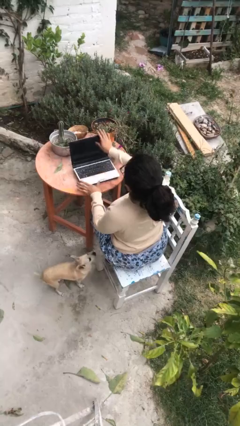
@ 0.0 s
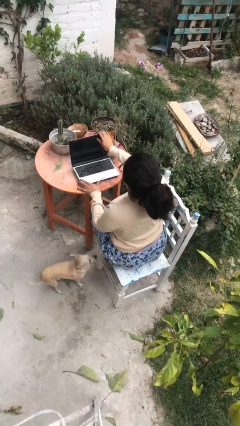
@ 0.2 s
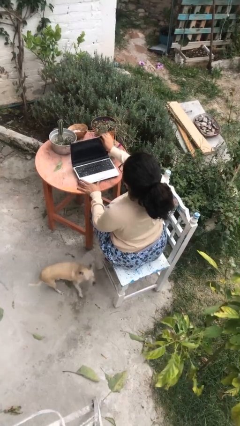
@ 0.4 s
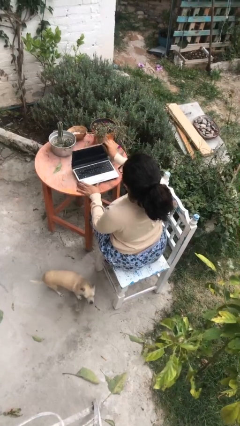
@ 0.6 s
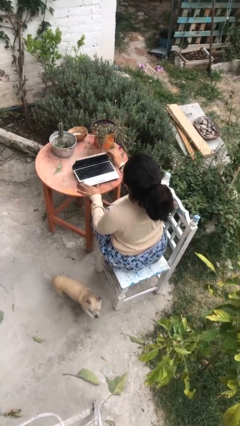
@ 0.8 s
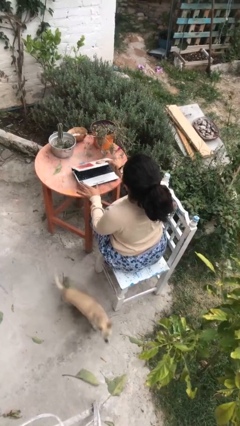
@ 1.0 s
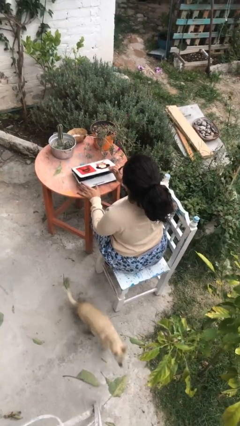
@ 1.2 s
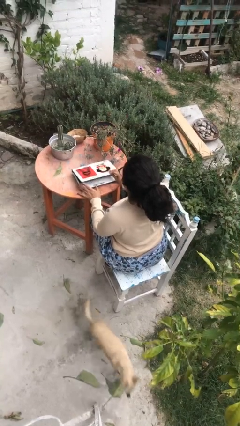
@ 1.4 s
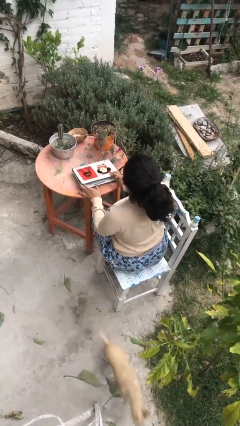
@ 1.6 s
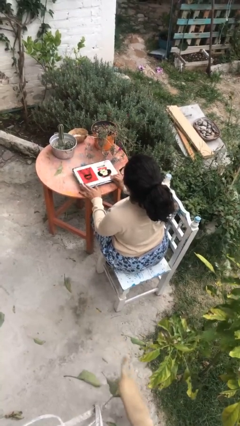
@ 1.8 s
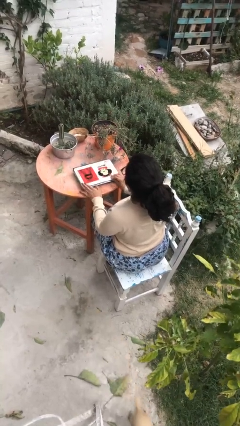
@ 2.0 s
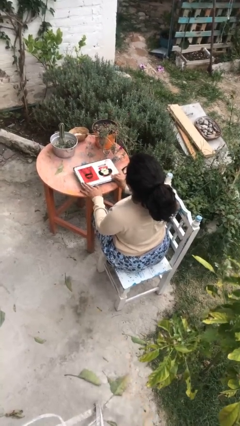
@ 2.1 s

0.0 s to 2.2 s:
person closes laptop

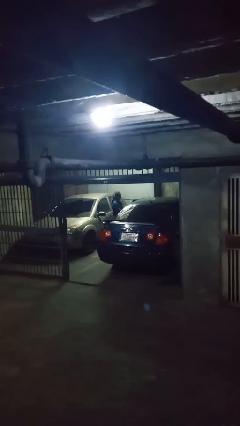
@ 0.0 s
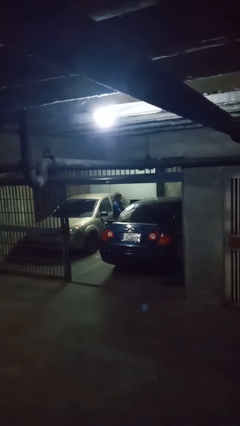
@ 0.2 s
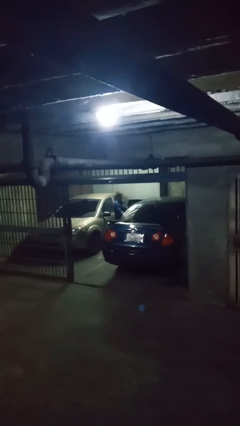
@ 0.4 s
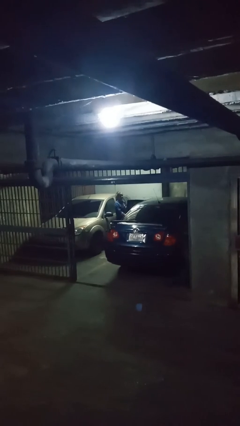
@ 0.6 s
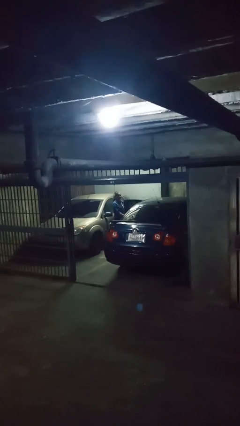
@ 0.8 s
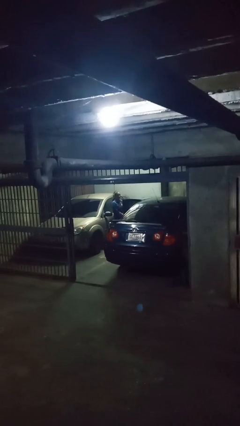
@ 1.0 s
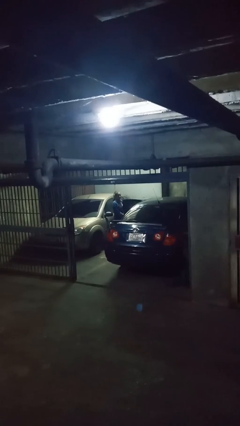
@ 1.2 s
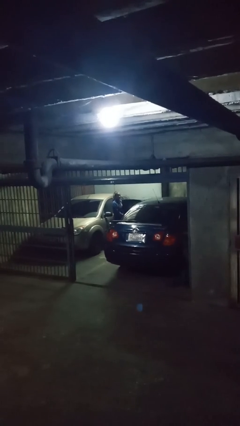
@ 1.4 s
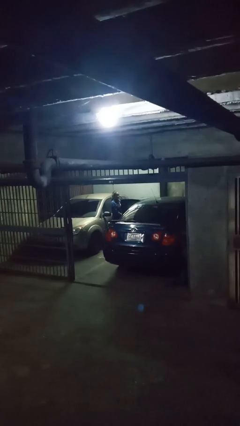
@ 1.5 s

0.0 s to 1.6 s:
person opens car door

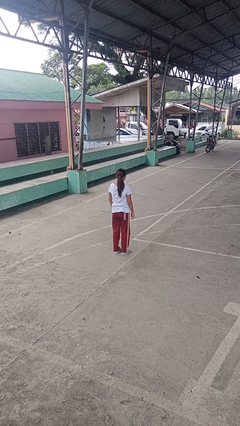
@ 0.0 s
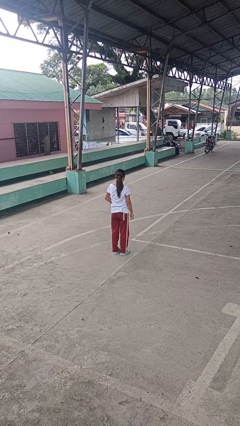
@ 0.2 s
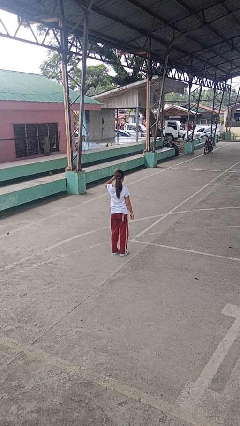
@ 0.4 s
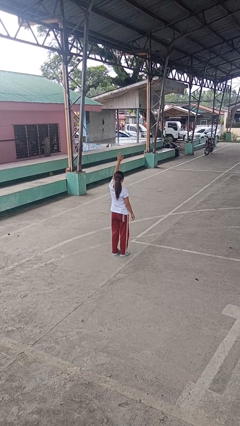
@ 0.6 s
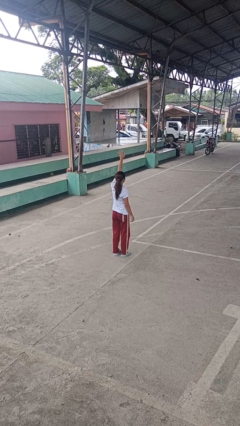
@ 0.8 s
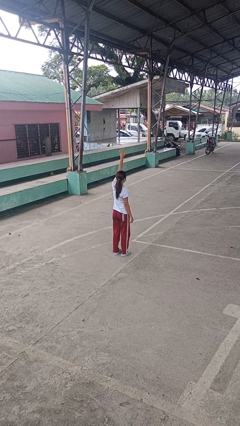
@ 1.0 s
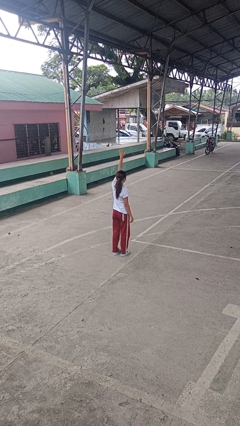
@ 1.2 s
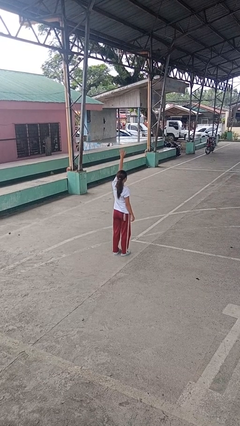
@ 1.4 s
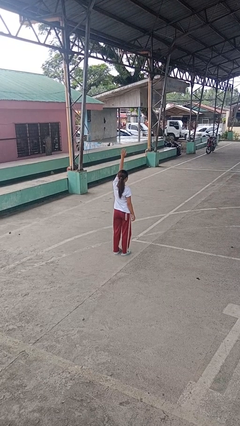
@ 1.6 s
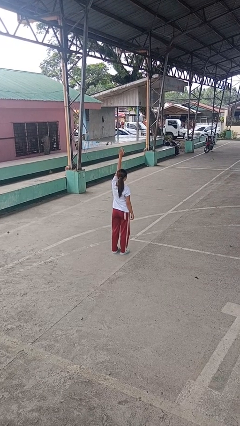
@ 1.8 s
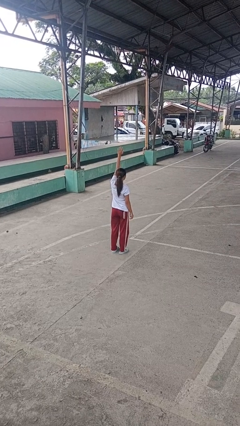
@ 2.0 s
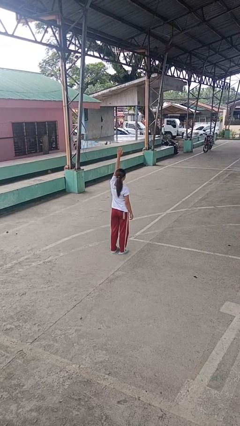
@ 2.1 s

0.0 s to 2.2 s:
person gestures raise hand

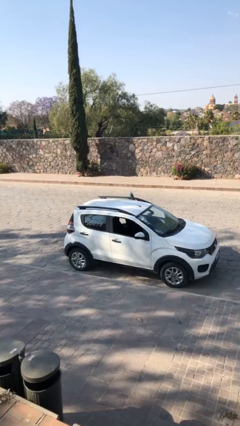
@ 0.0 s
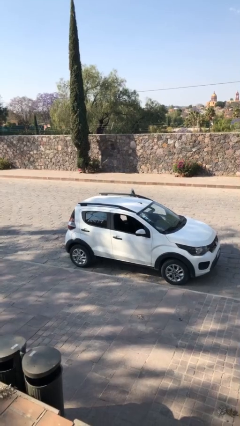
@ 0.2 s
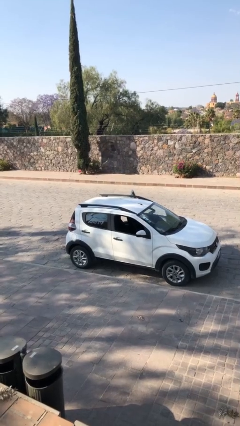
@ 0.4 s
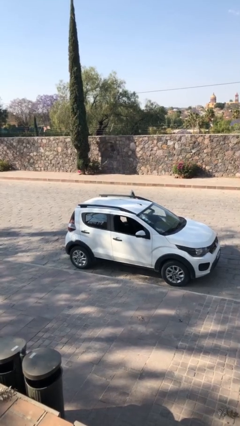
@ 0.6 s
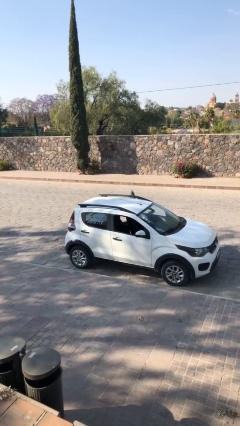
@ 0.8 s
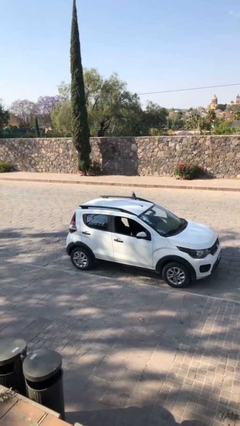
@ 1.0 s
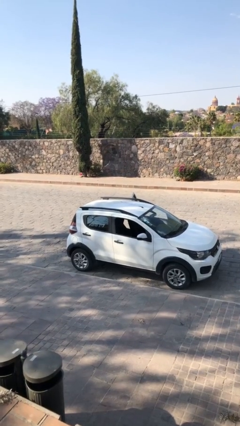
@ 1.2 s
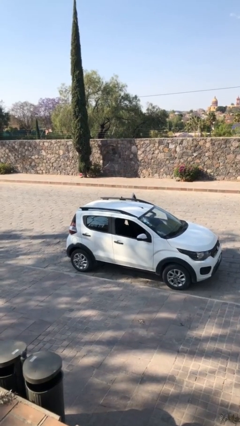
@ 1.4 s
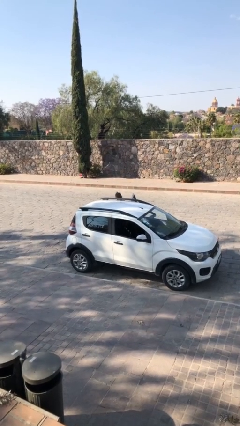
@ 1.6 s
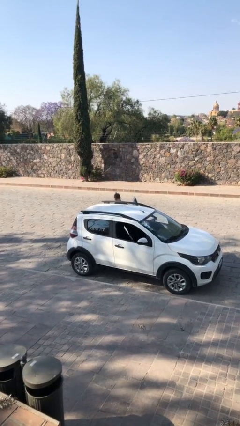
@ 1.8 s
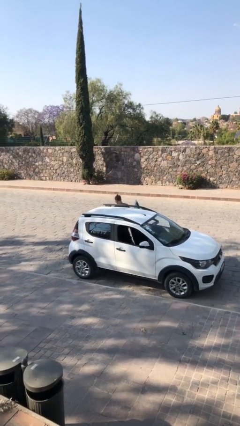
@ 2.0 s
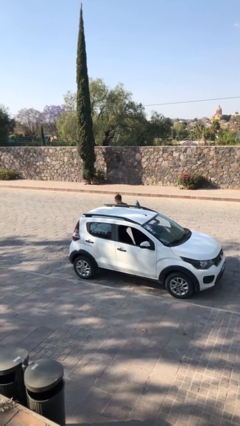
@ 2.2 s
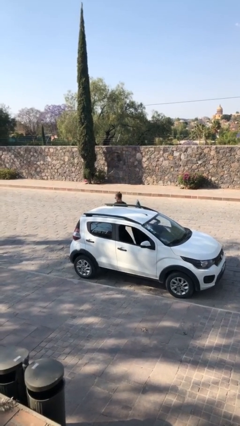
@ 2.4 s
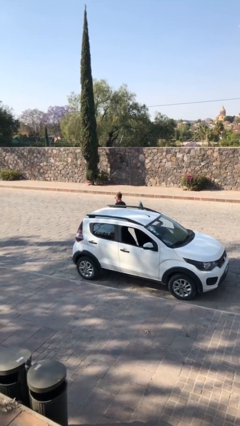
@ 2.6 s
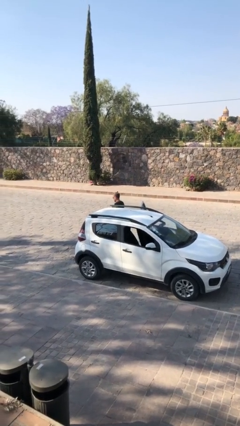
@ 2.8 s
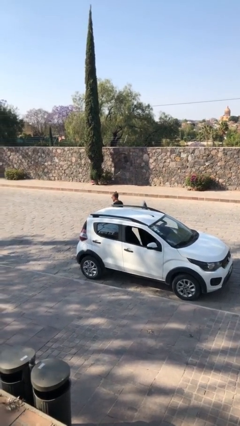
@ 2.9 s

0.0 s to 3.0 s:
person exits car

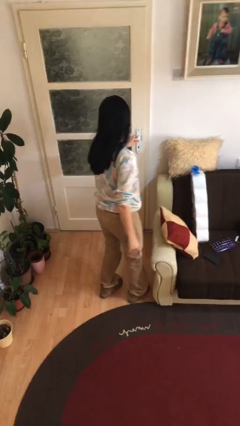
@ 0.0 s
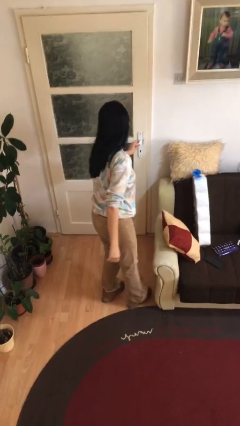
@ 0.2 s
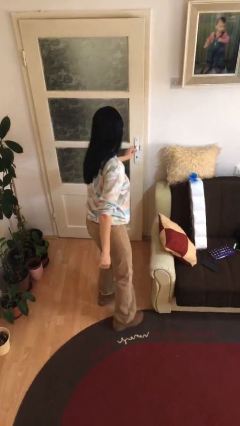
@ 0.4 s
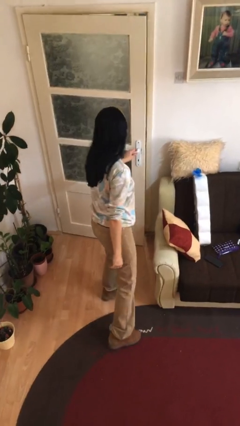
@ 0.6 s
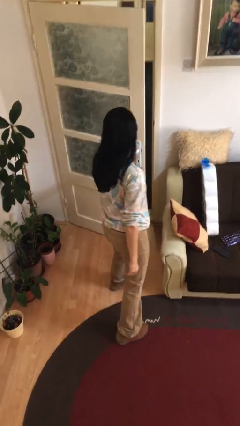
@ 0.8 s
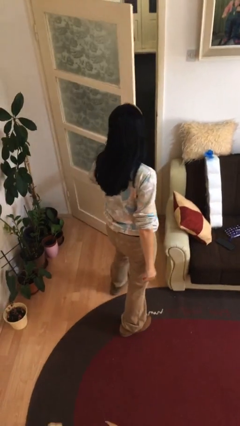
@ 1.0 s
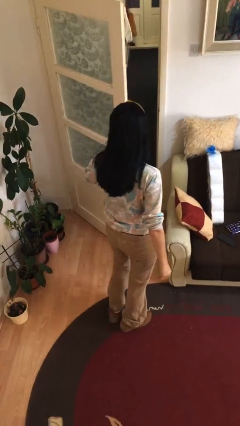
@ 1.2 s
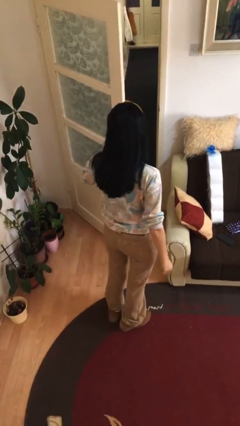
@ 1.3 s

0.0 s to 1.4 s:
person opens facility door

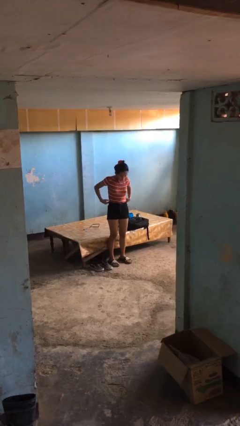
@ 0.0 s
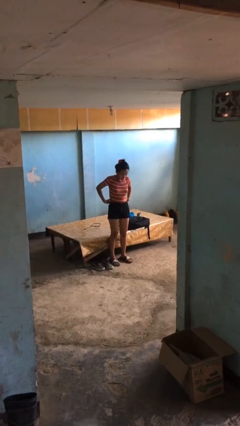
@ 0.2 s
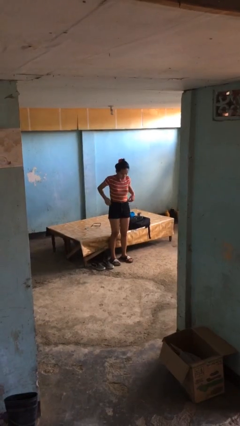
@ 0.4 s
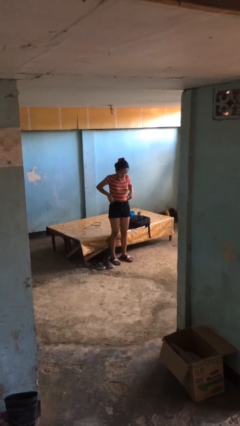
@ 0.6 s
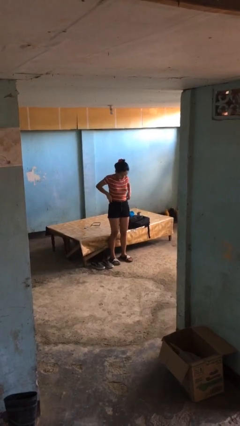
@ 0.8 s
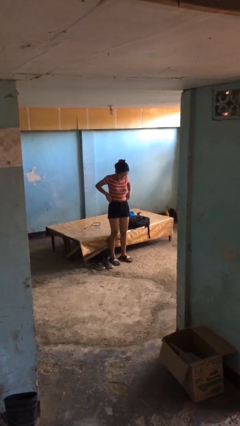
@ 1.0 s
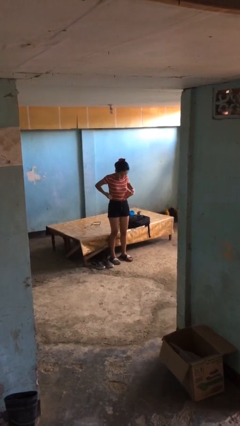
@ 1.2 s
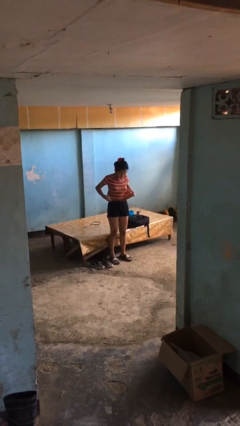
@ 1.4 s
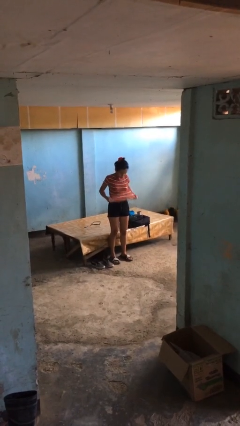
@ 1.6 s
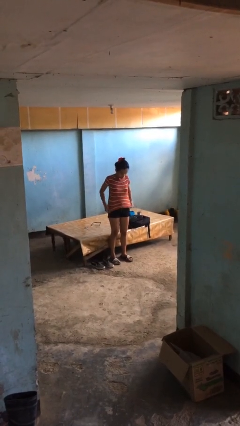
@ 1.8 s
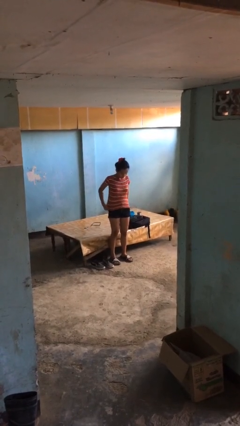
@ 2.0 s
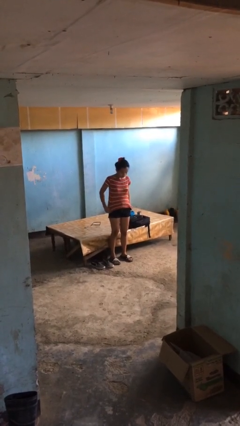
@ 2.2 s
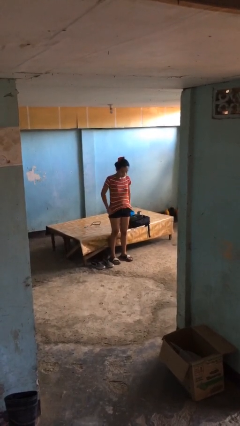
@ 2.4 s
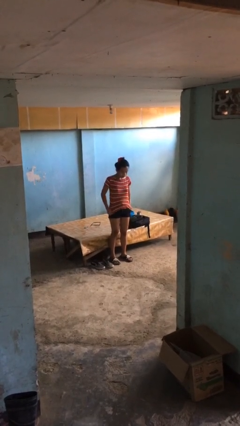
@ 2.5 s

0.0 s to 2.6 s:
person untucks shirt

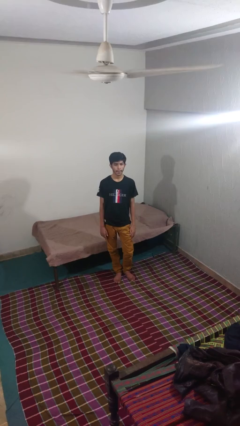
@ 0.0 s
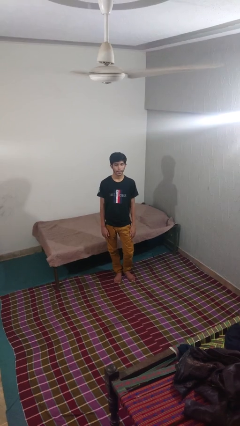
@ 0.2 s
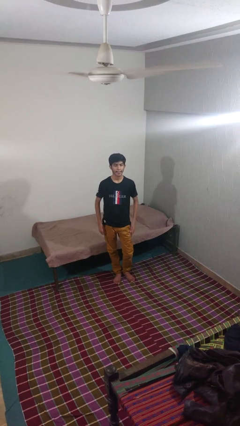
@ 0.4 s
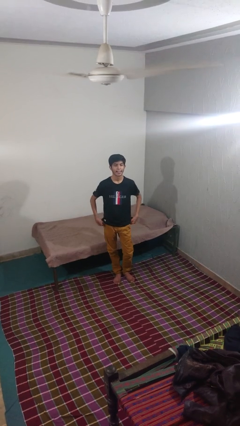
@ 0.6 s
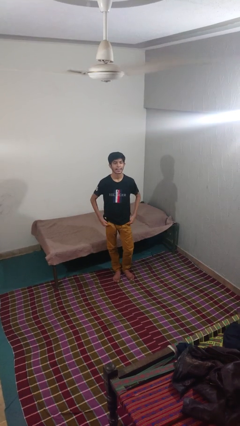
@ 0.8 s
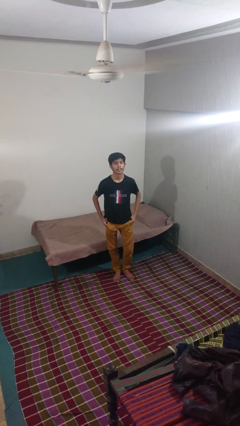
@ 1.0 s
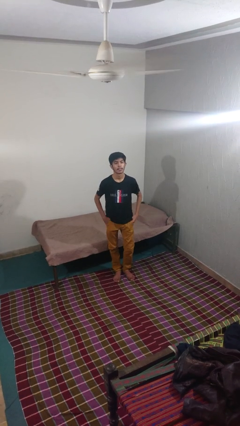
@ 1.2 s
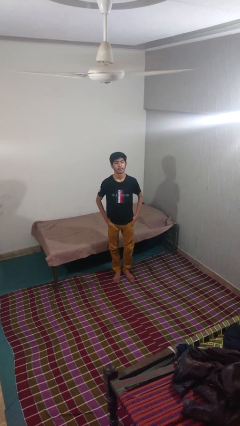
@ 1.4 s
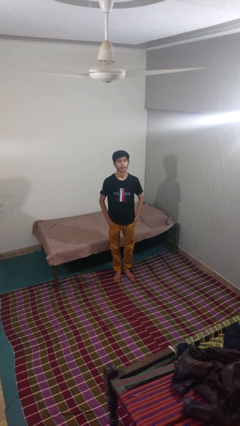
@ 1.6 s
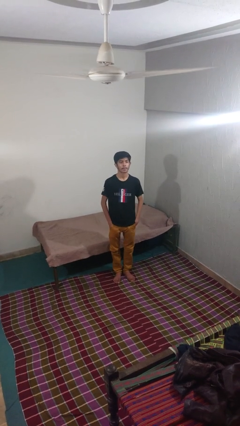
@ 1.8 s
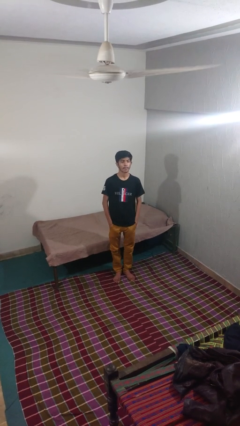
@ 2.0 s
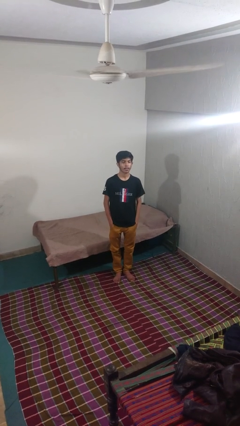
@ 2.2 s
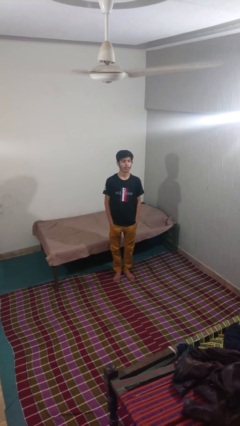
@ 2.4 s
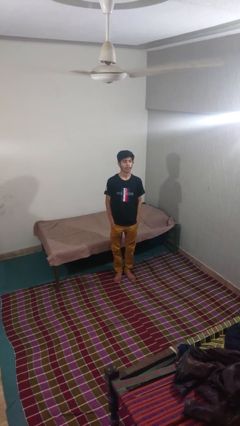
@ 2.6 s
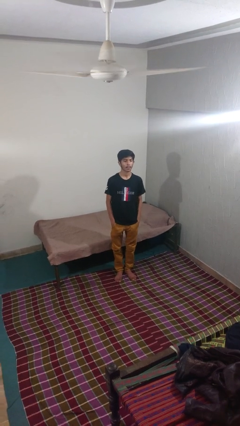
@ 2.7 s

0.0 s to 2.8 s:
person puts hands in back pockets

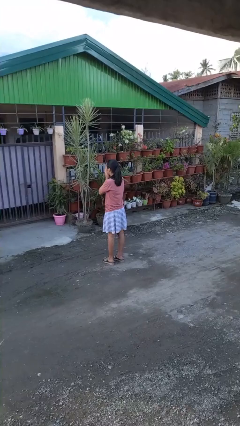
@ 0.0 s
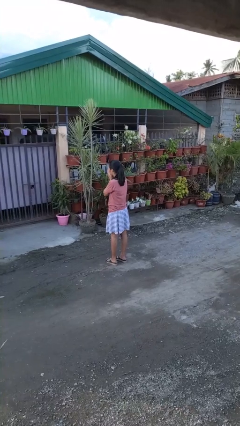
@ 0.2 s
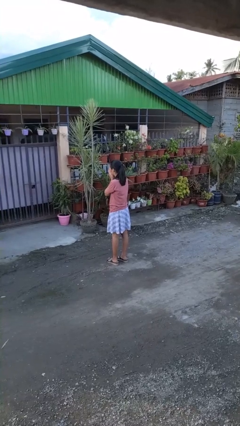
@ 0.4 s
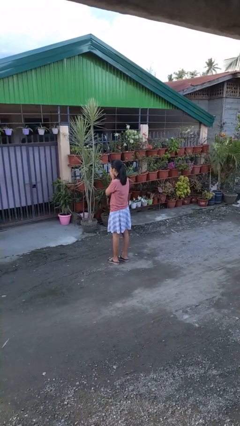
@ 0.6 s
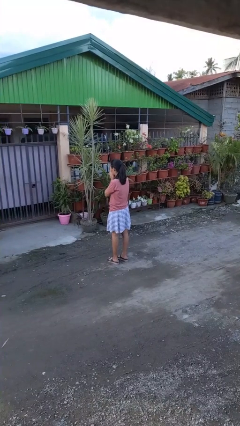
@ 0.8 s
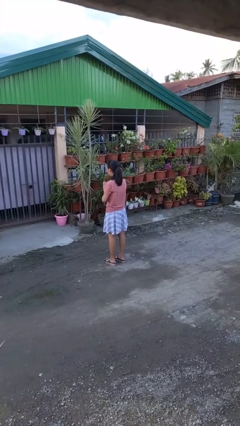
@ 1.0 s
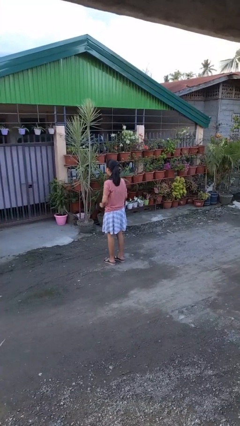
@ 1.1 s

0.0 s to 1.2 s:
person blows into hands
